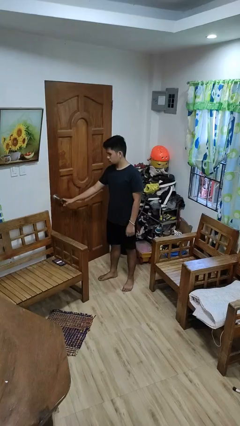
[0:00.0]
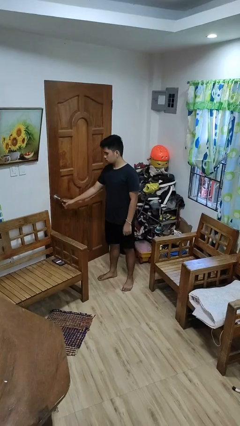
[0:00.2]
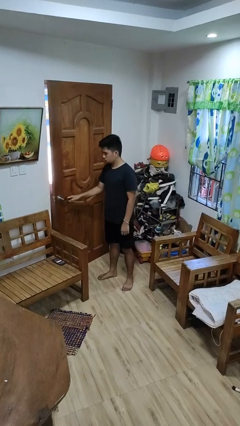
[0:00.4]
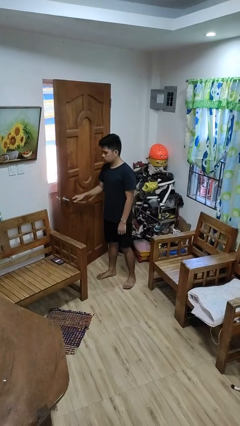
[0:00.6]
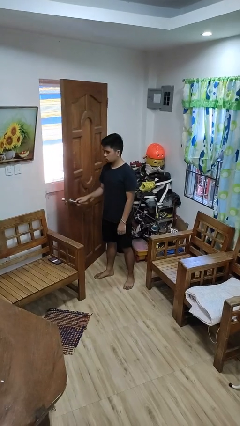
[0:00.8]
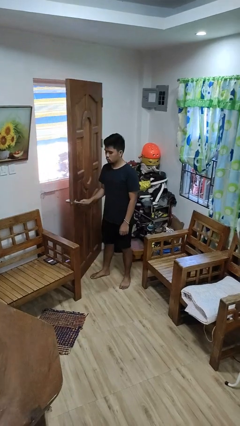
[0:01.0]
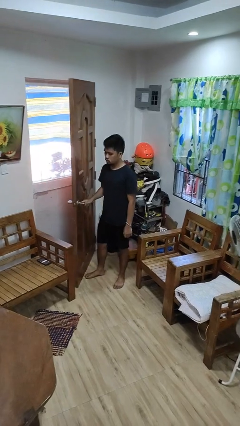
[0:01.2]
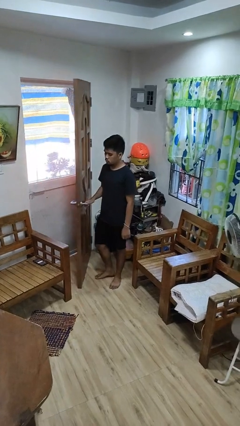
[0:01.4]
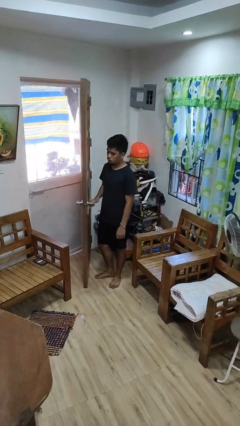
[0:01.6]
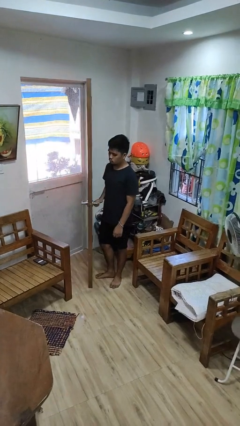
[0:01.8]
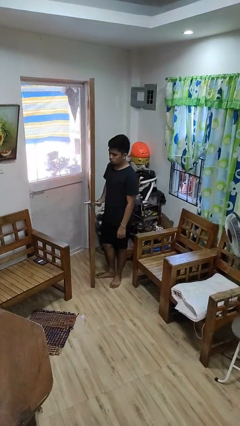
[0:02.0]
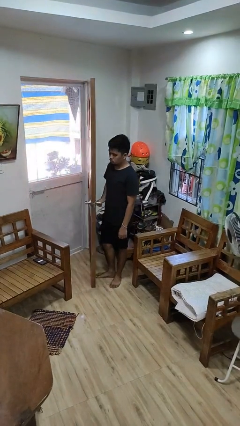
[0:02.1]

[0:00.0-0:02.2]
person opens facility door

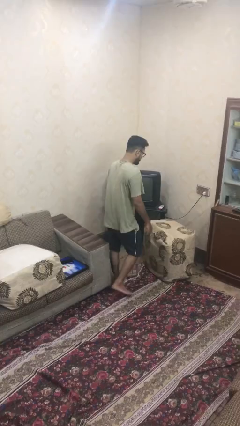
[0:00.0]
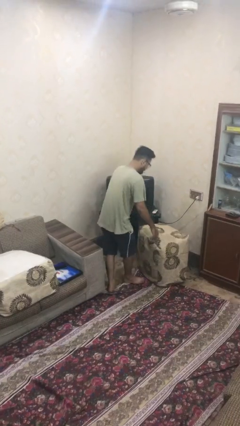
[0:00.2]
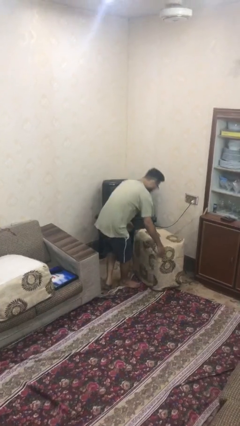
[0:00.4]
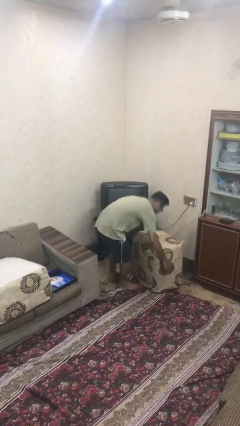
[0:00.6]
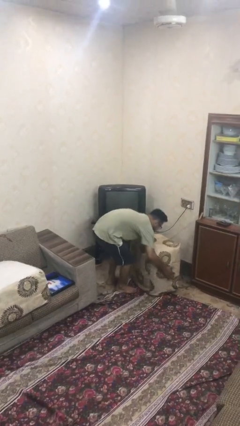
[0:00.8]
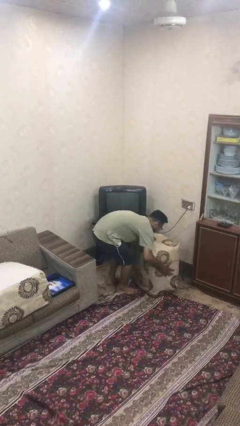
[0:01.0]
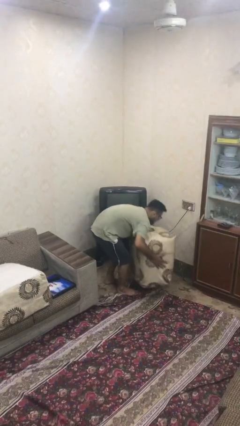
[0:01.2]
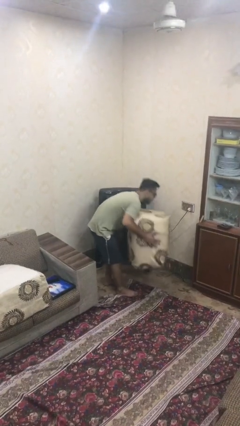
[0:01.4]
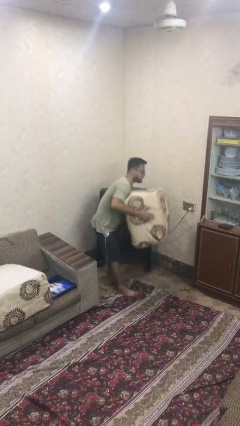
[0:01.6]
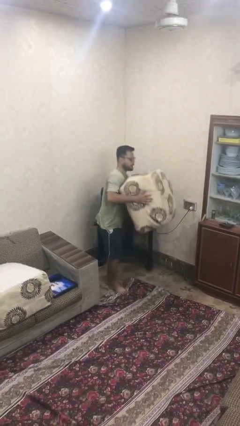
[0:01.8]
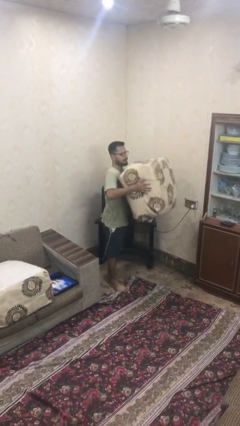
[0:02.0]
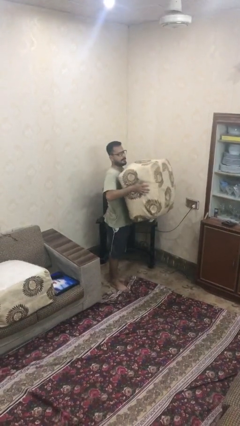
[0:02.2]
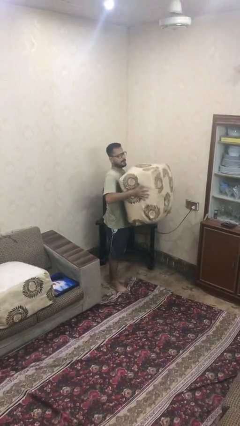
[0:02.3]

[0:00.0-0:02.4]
person picks up object from floor

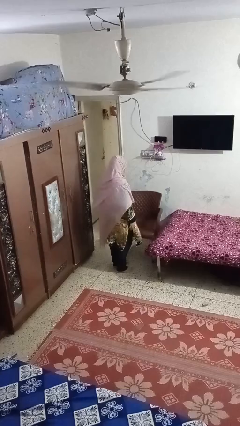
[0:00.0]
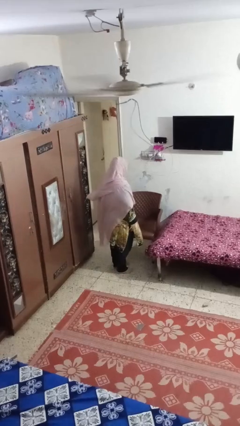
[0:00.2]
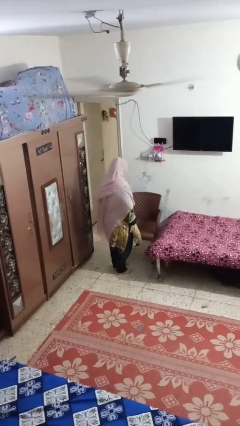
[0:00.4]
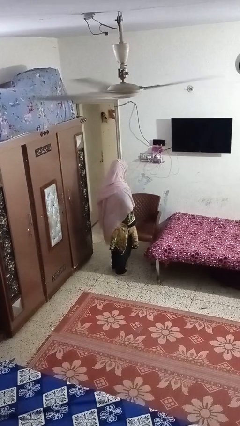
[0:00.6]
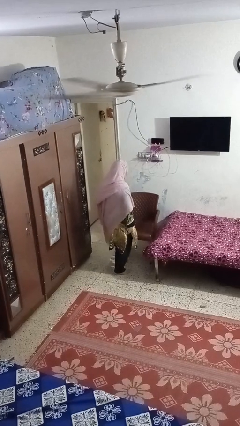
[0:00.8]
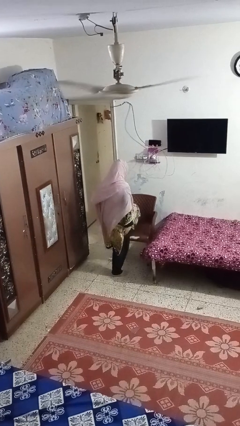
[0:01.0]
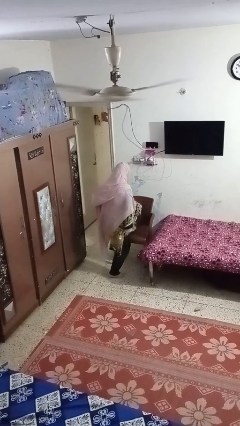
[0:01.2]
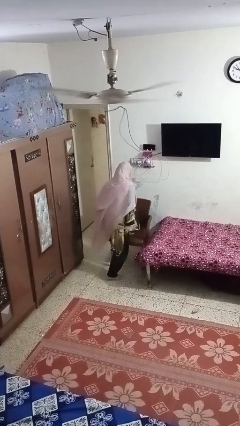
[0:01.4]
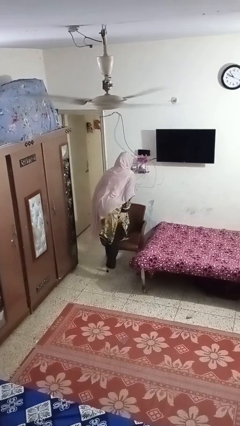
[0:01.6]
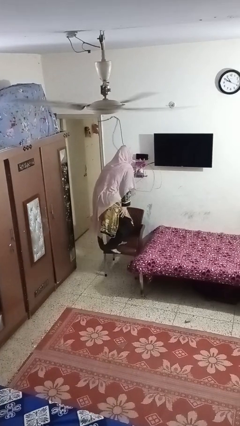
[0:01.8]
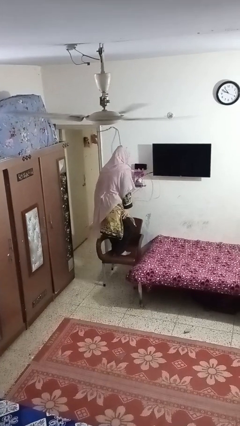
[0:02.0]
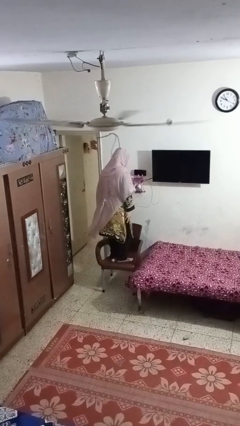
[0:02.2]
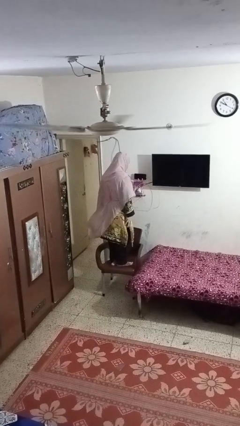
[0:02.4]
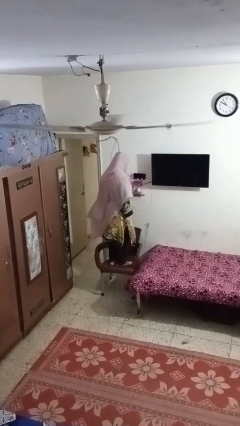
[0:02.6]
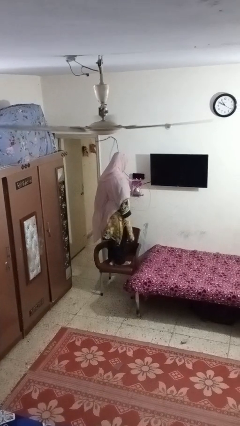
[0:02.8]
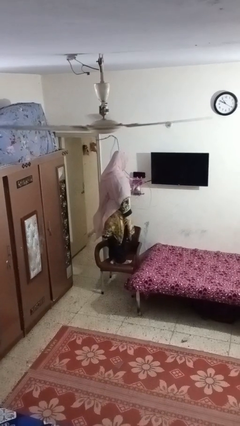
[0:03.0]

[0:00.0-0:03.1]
person climbs on chair

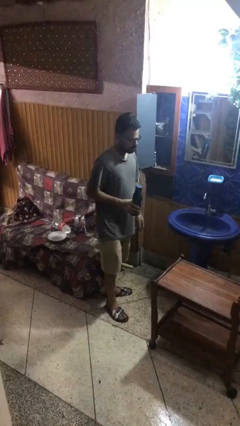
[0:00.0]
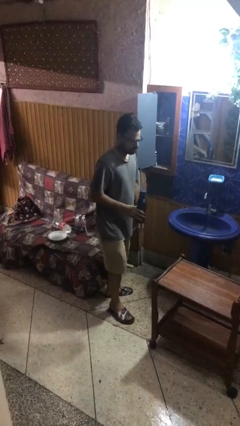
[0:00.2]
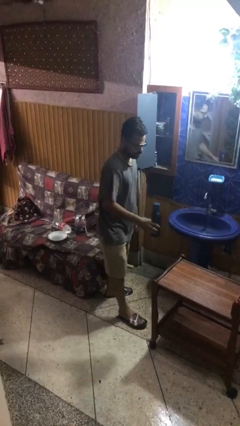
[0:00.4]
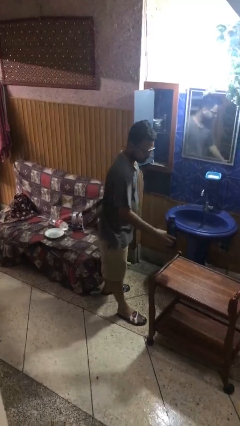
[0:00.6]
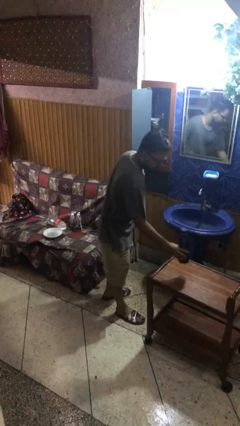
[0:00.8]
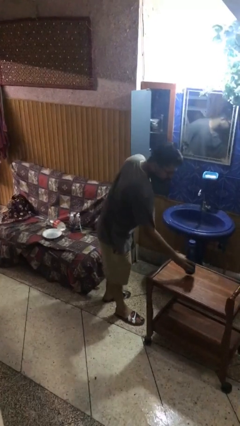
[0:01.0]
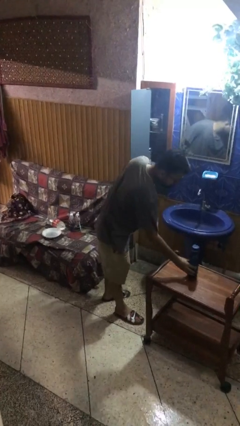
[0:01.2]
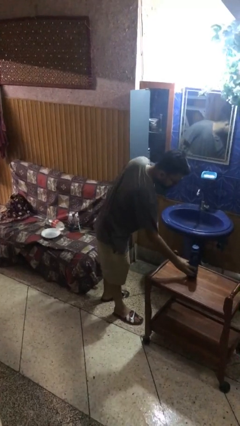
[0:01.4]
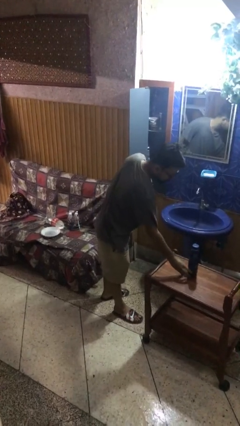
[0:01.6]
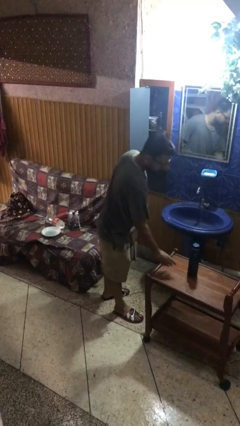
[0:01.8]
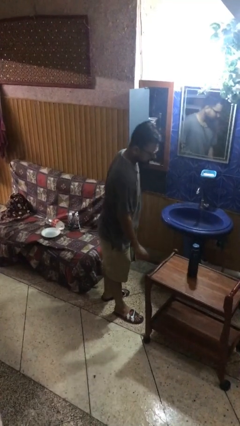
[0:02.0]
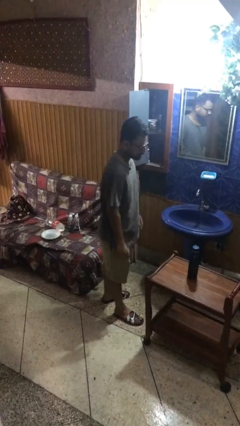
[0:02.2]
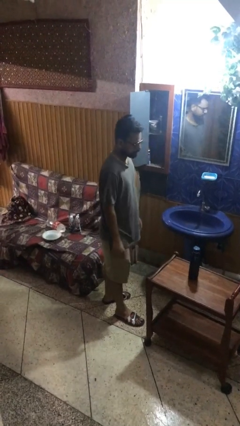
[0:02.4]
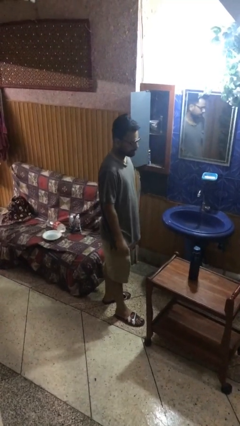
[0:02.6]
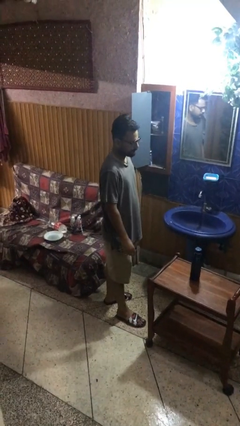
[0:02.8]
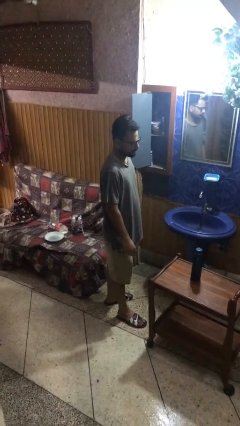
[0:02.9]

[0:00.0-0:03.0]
person puts down object on table

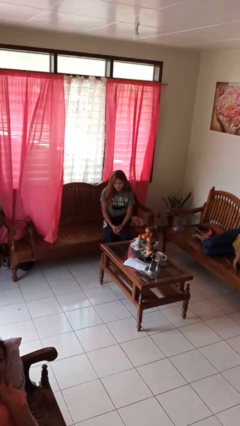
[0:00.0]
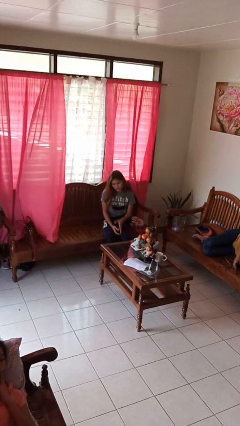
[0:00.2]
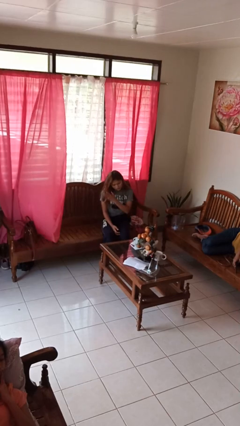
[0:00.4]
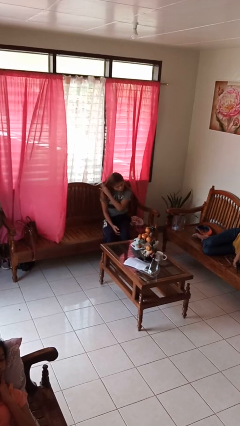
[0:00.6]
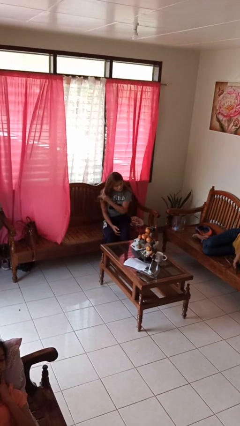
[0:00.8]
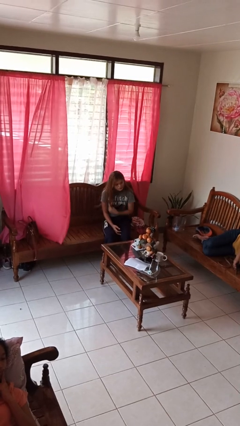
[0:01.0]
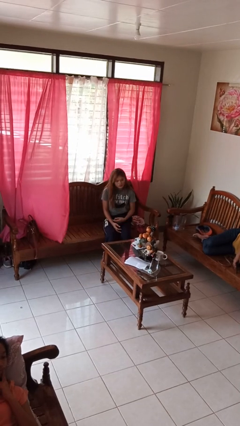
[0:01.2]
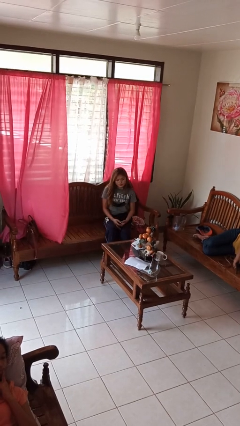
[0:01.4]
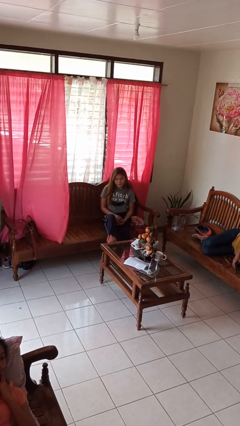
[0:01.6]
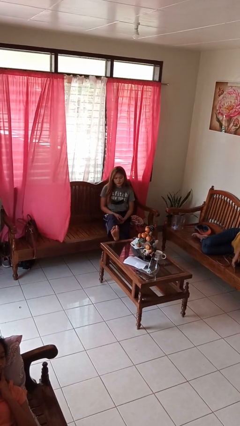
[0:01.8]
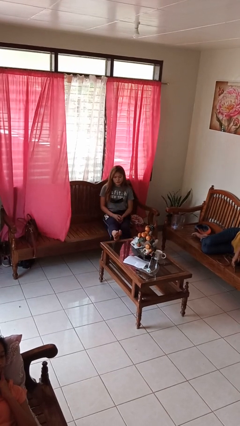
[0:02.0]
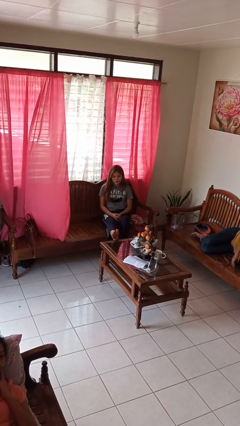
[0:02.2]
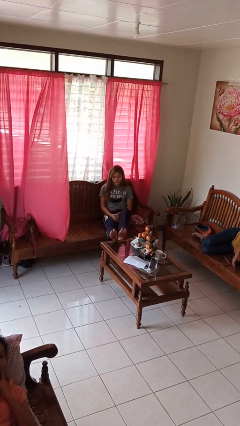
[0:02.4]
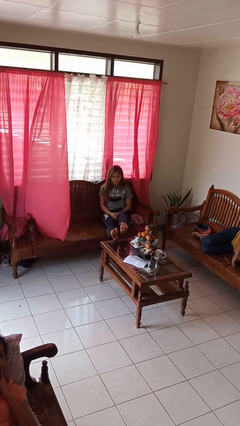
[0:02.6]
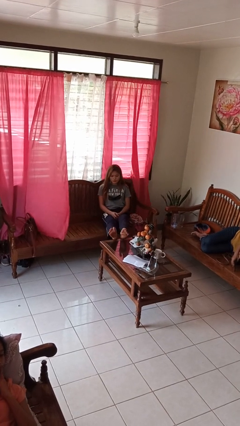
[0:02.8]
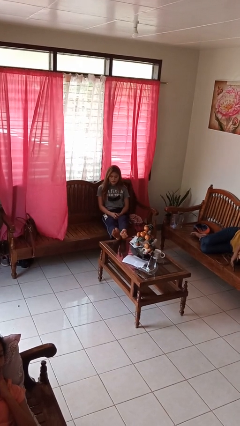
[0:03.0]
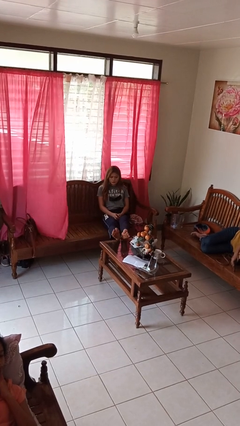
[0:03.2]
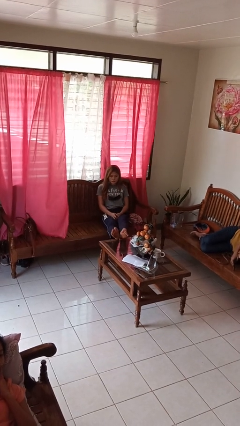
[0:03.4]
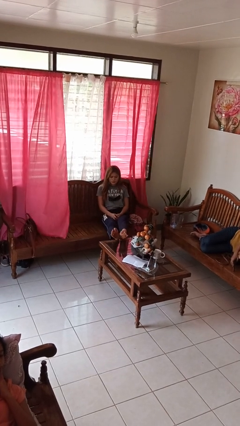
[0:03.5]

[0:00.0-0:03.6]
person puts feet up

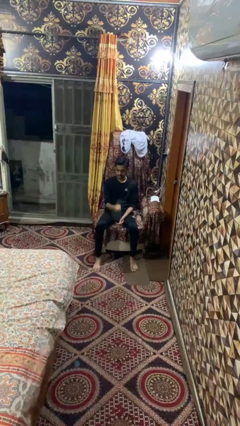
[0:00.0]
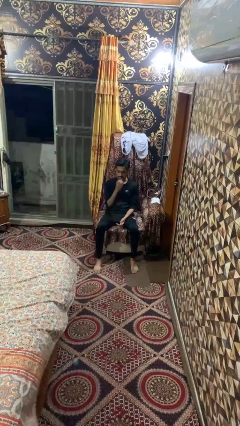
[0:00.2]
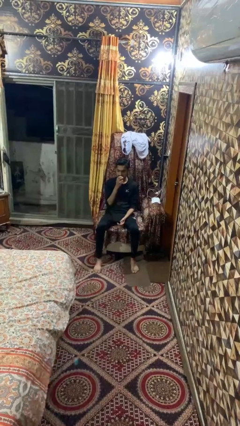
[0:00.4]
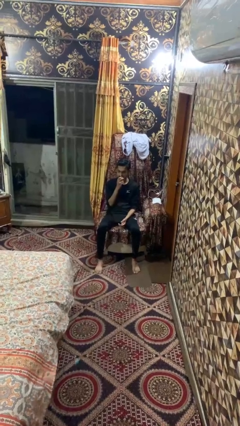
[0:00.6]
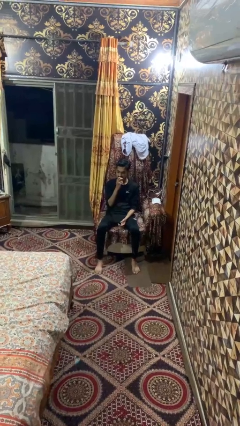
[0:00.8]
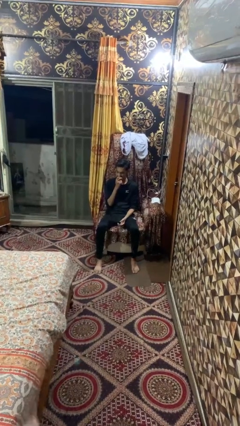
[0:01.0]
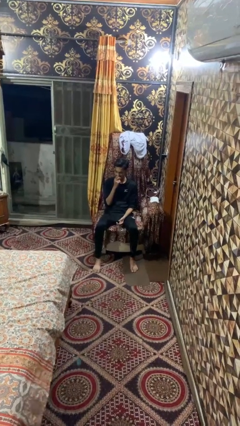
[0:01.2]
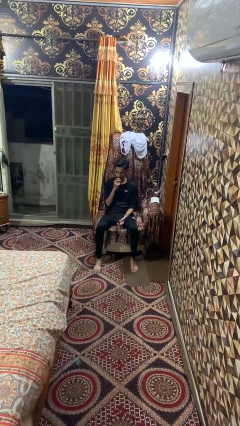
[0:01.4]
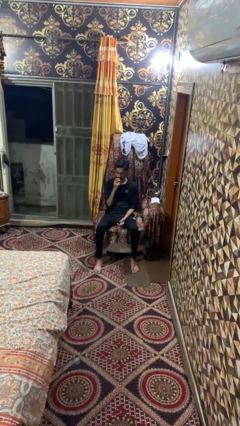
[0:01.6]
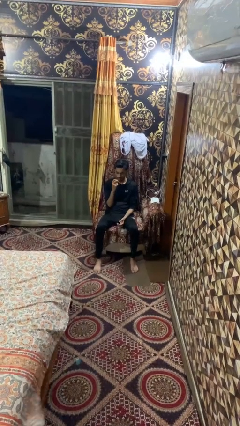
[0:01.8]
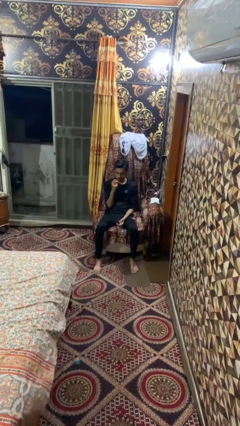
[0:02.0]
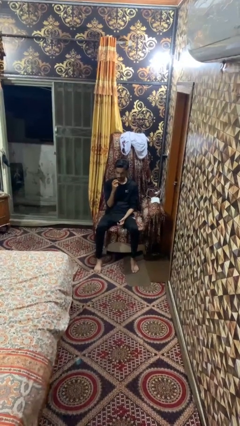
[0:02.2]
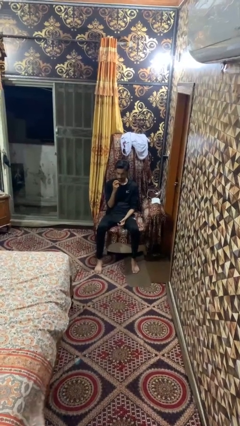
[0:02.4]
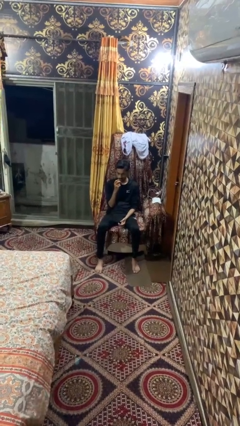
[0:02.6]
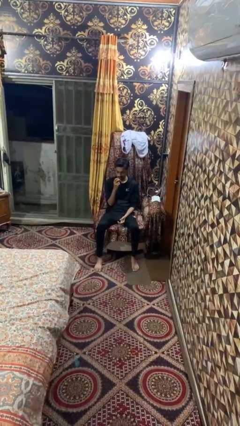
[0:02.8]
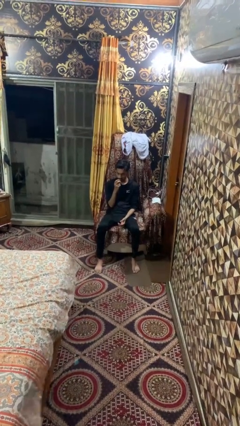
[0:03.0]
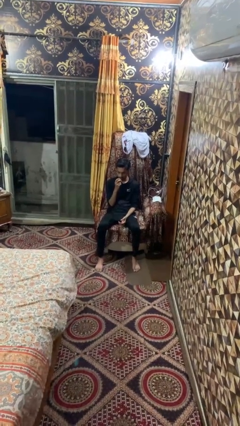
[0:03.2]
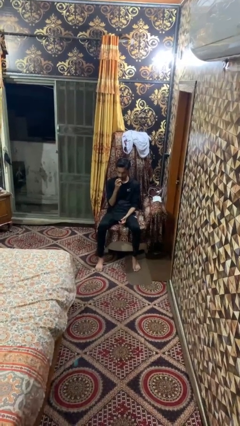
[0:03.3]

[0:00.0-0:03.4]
person eats apple
